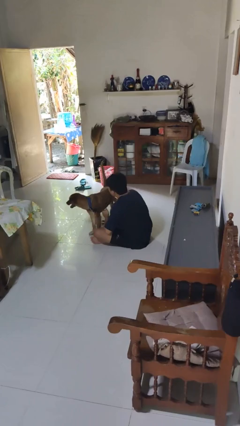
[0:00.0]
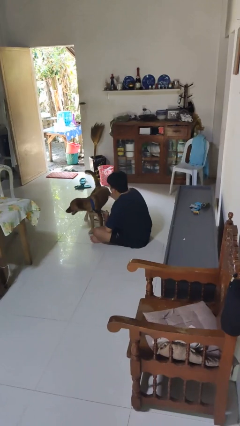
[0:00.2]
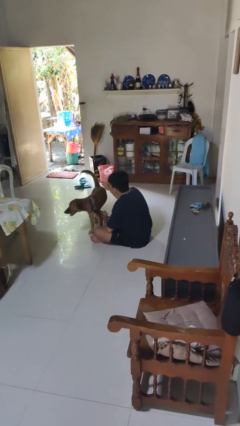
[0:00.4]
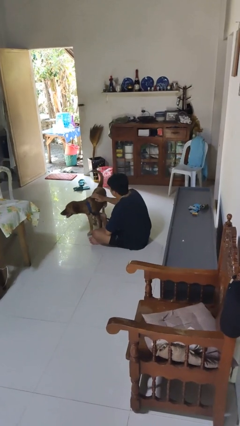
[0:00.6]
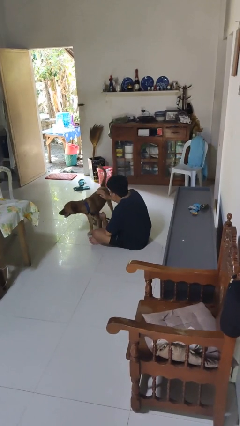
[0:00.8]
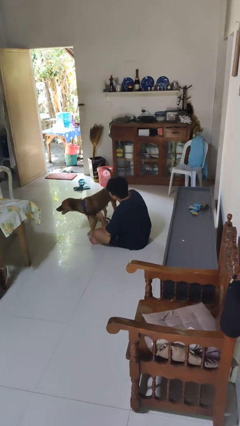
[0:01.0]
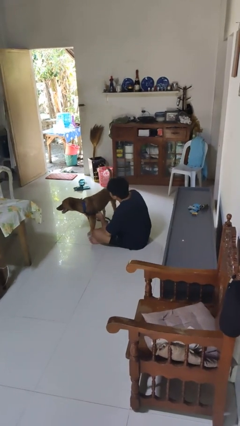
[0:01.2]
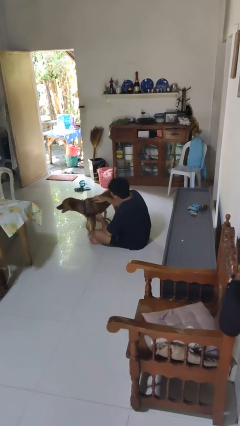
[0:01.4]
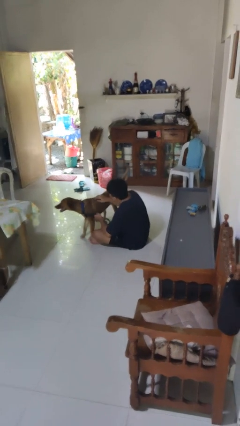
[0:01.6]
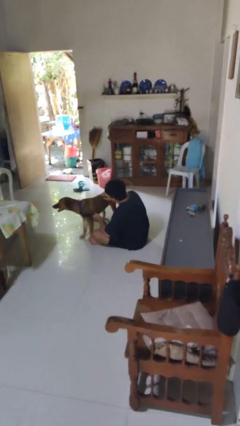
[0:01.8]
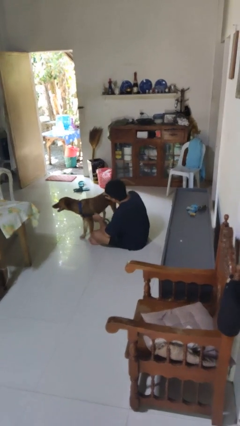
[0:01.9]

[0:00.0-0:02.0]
person pets dog

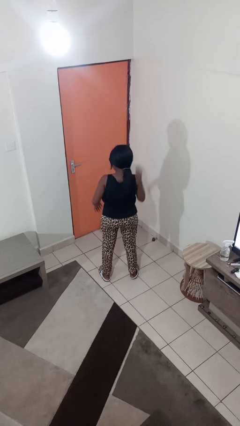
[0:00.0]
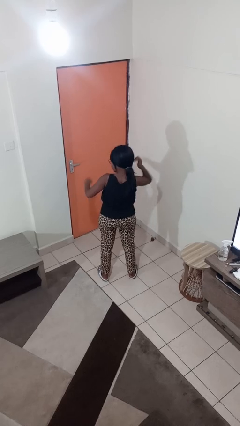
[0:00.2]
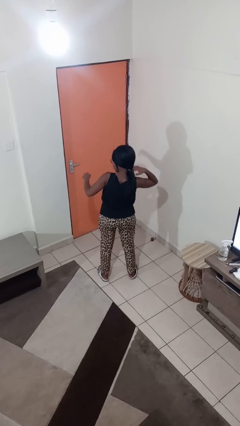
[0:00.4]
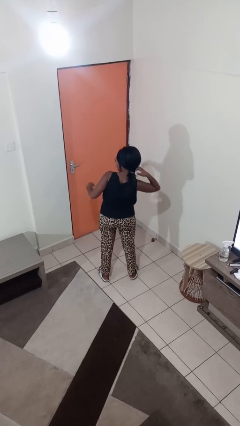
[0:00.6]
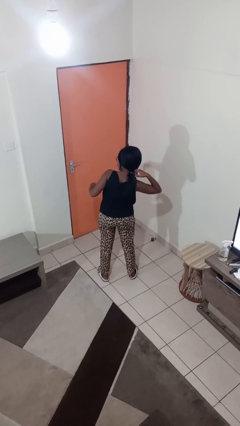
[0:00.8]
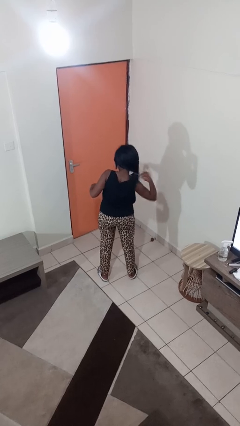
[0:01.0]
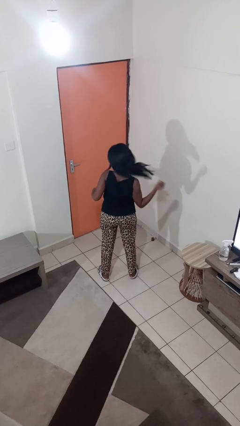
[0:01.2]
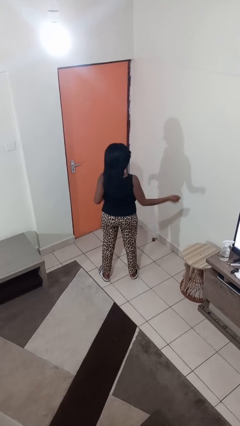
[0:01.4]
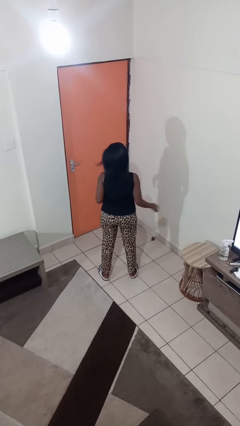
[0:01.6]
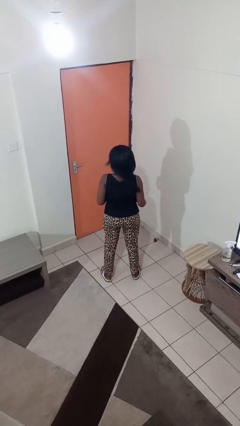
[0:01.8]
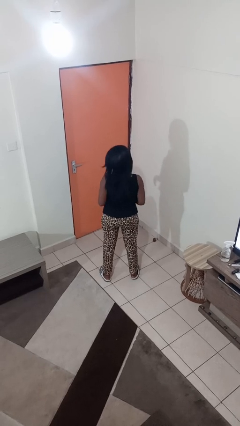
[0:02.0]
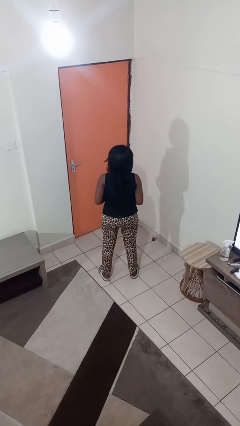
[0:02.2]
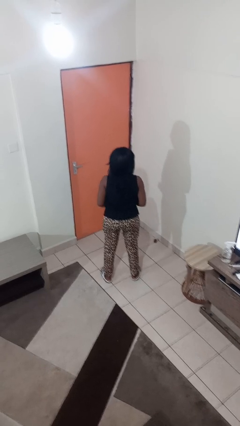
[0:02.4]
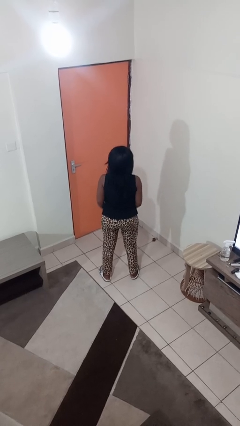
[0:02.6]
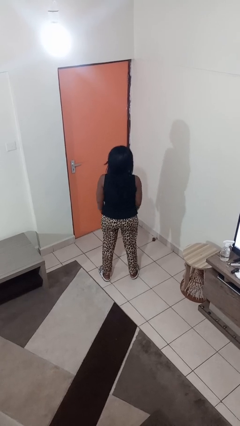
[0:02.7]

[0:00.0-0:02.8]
person takes off hairtie

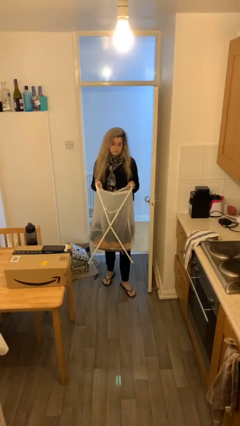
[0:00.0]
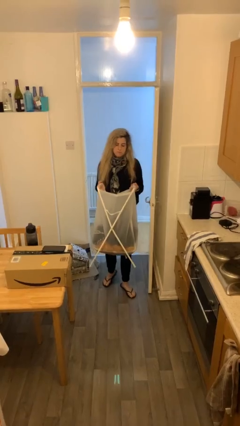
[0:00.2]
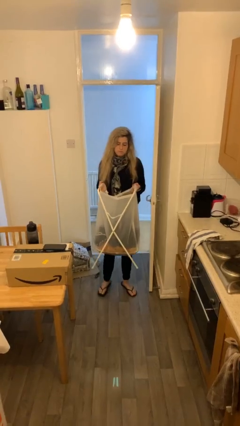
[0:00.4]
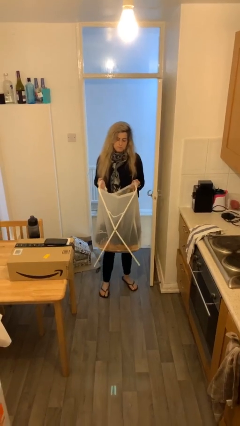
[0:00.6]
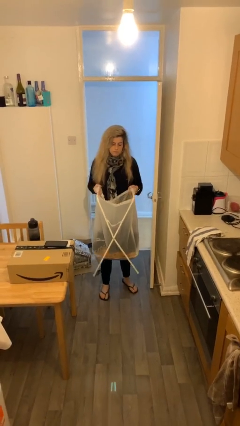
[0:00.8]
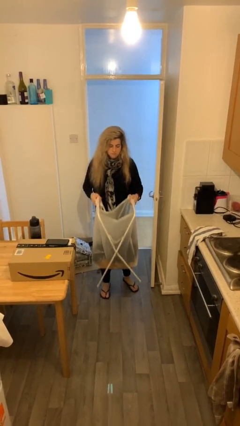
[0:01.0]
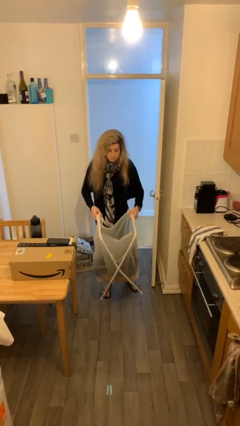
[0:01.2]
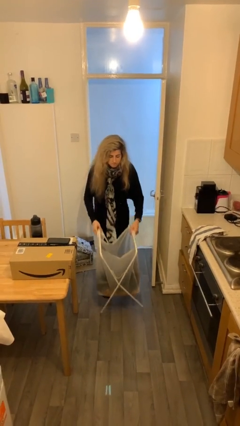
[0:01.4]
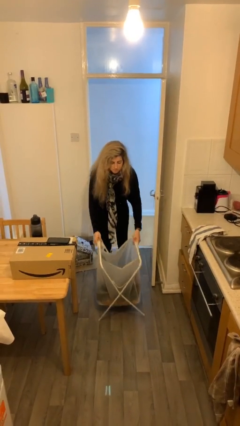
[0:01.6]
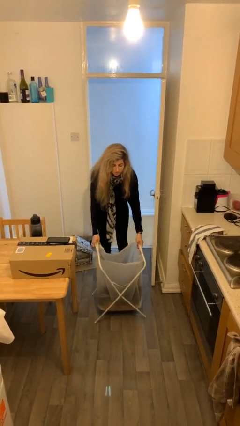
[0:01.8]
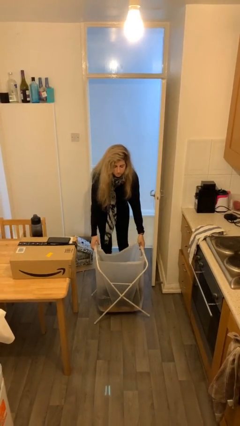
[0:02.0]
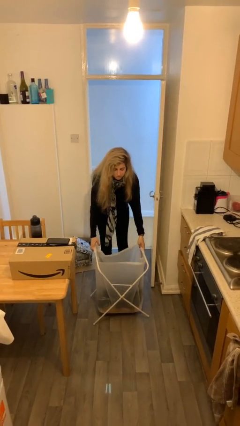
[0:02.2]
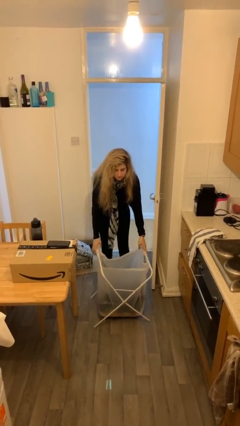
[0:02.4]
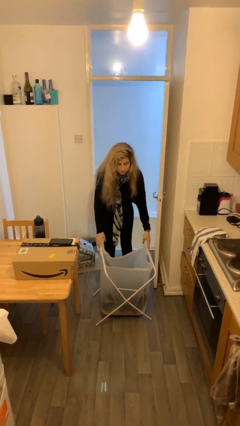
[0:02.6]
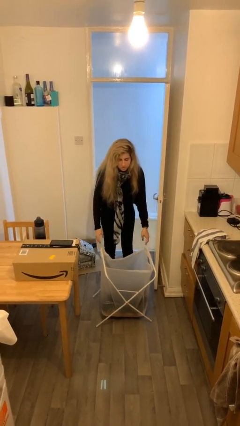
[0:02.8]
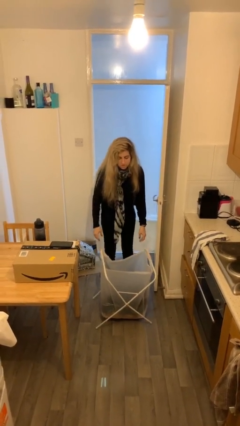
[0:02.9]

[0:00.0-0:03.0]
person puts down object on floor

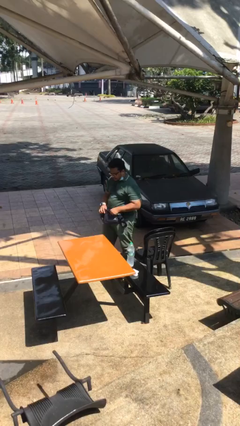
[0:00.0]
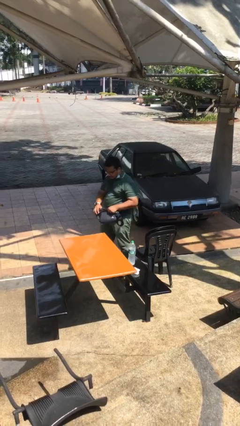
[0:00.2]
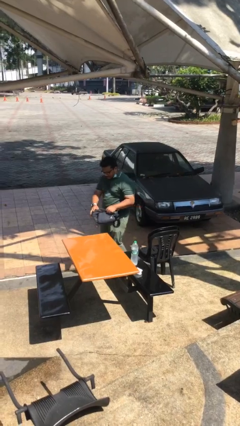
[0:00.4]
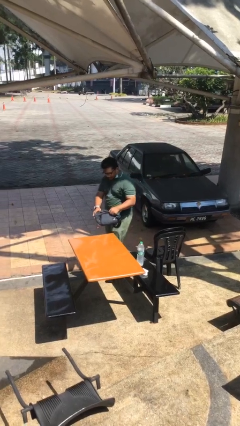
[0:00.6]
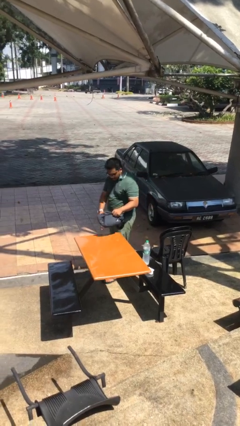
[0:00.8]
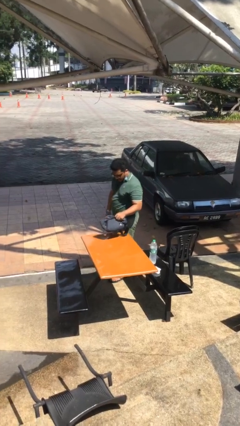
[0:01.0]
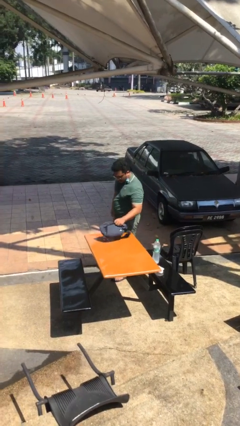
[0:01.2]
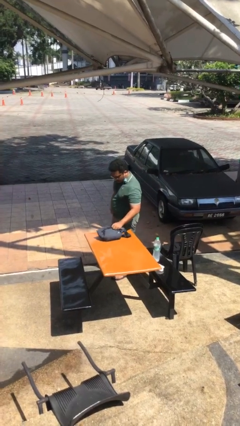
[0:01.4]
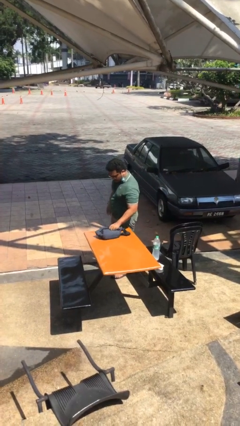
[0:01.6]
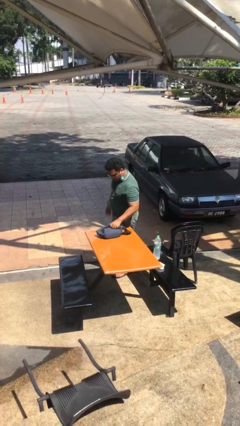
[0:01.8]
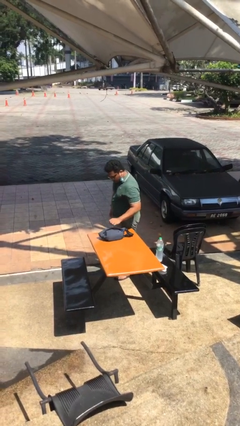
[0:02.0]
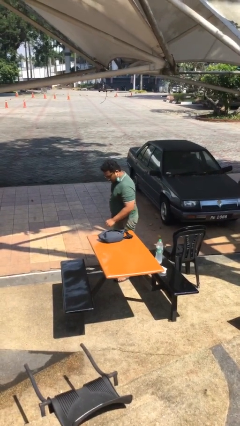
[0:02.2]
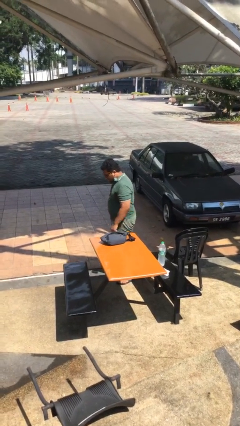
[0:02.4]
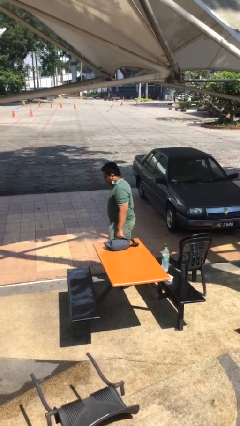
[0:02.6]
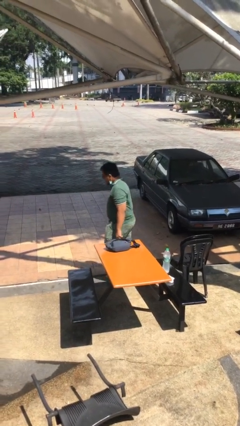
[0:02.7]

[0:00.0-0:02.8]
person puts down object on table

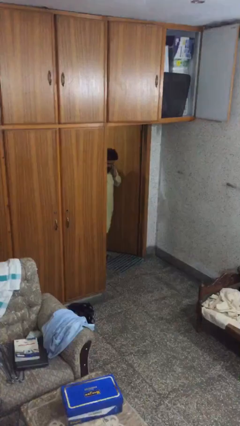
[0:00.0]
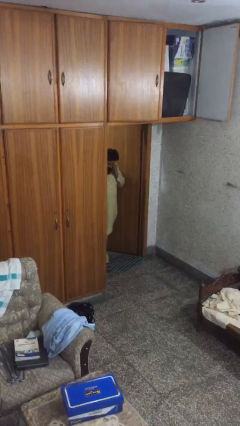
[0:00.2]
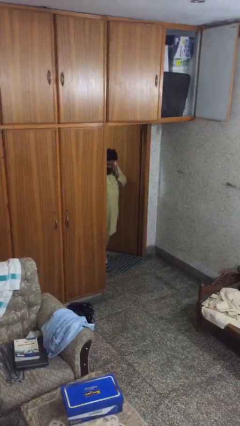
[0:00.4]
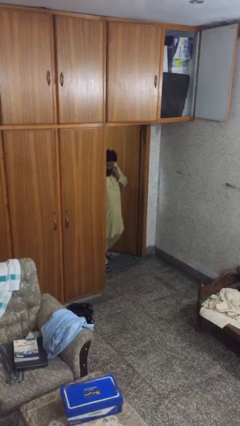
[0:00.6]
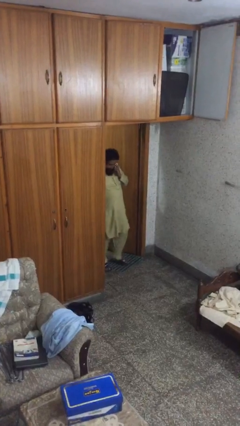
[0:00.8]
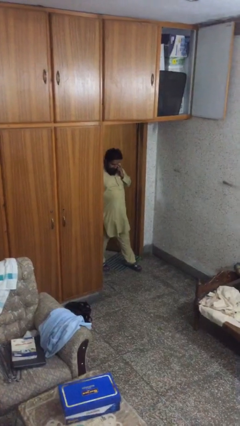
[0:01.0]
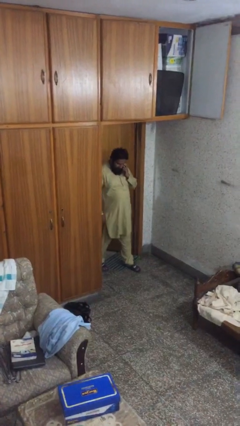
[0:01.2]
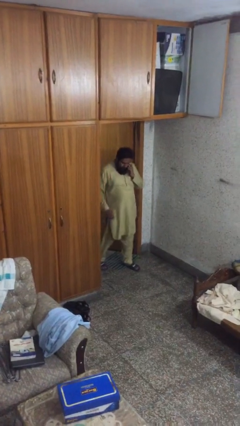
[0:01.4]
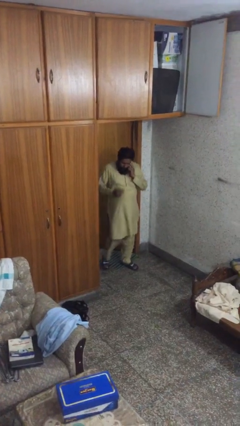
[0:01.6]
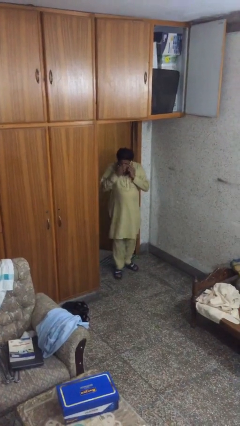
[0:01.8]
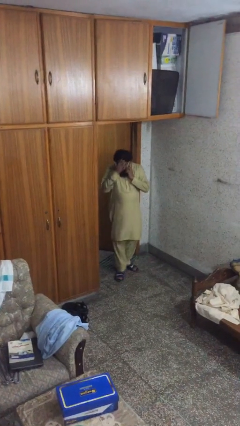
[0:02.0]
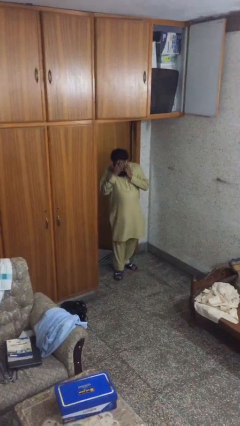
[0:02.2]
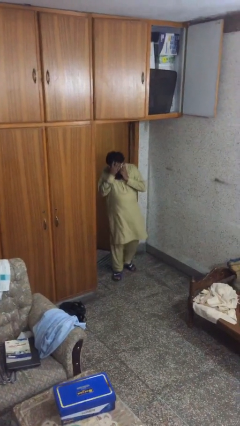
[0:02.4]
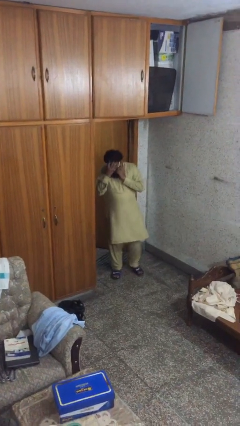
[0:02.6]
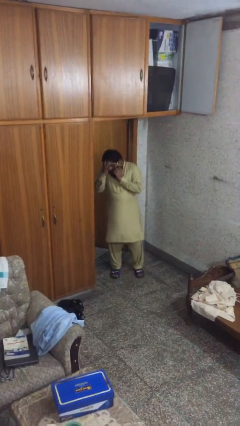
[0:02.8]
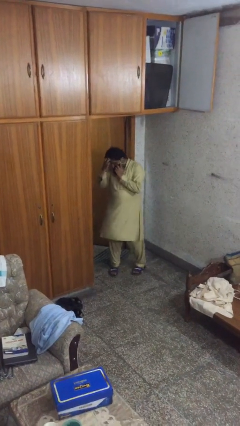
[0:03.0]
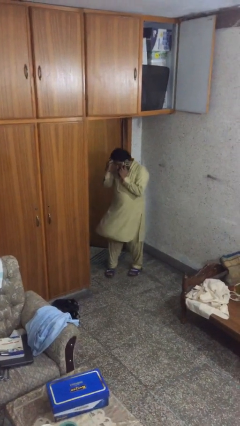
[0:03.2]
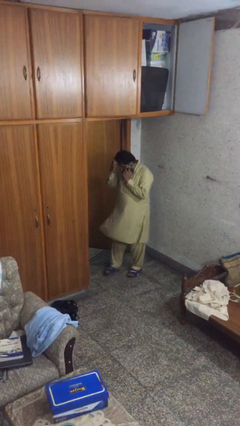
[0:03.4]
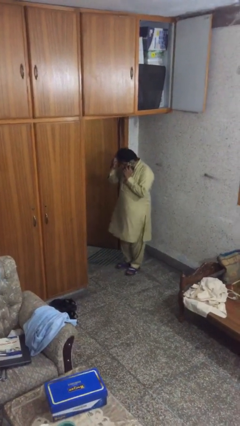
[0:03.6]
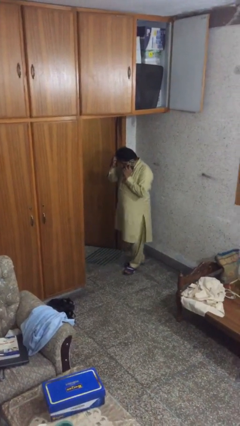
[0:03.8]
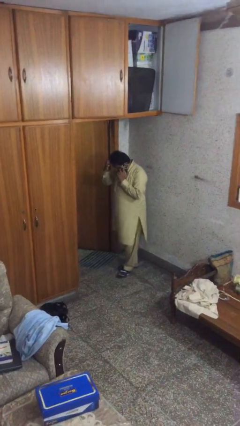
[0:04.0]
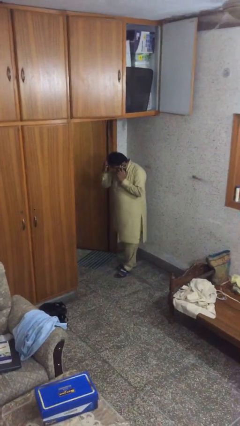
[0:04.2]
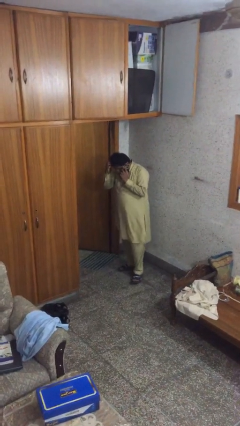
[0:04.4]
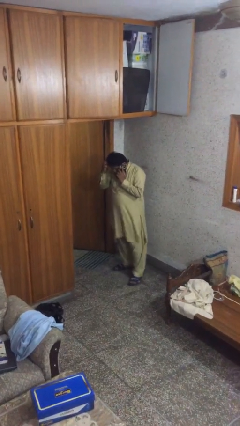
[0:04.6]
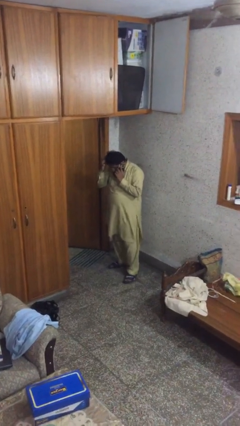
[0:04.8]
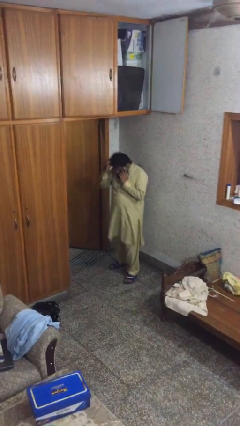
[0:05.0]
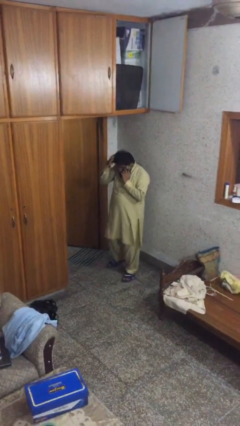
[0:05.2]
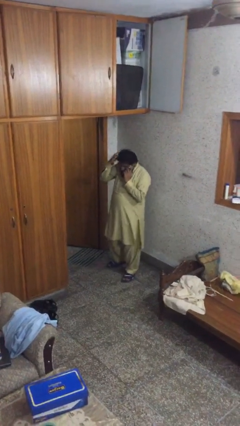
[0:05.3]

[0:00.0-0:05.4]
person enters scene through structure

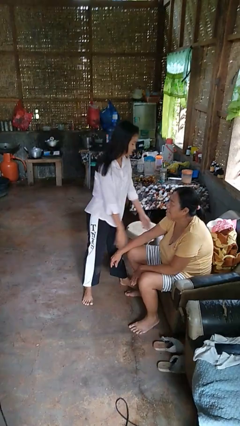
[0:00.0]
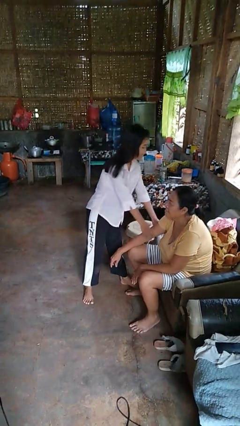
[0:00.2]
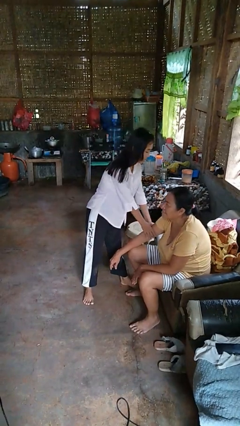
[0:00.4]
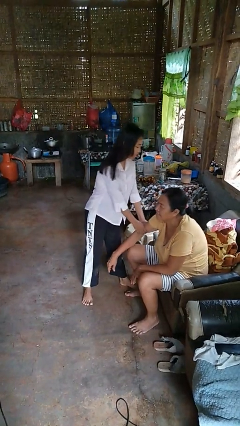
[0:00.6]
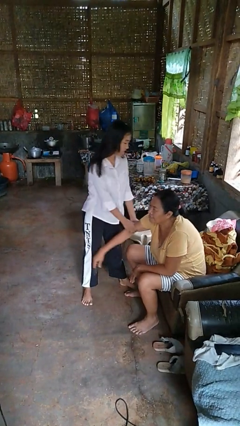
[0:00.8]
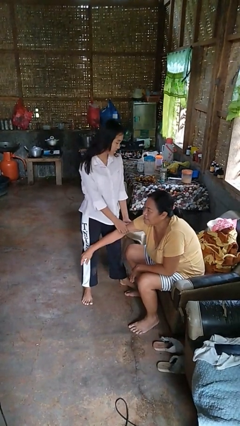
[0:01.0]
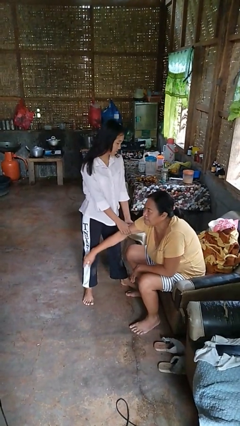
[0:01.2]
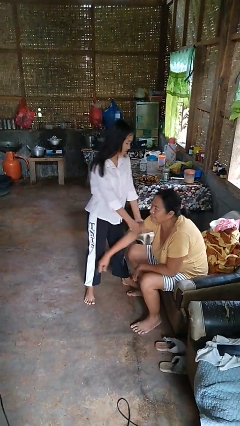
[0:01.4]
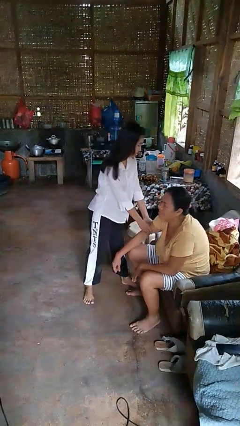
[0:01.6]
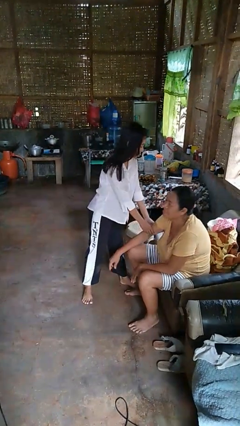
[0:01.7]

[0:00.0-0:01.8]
person grabs person by bicep
